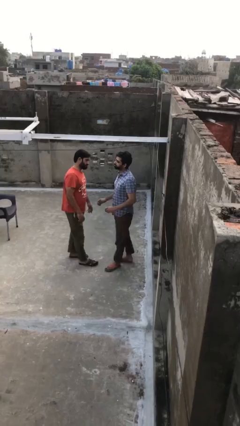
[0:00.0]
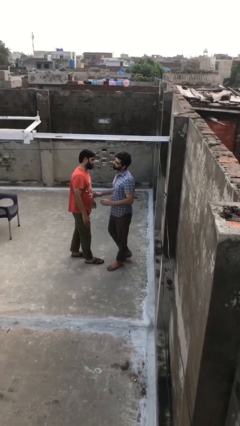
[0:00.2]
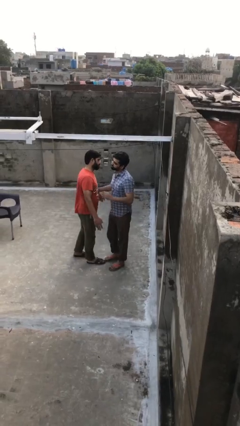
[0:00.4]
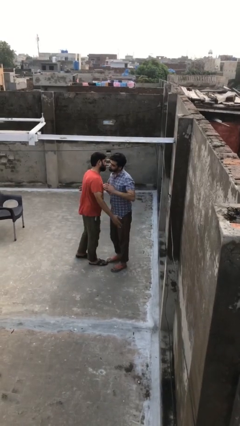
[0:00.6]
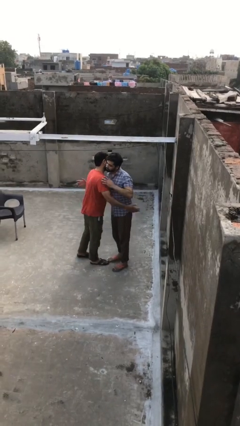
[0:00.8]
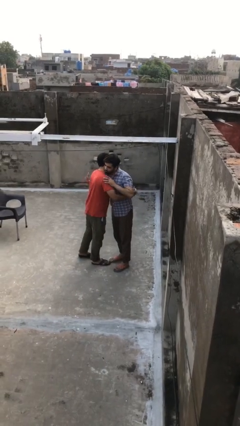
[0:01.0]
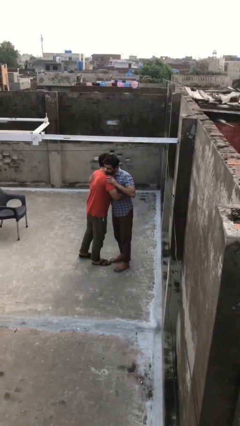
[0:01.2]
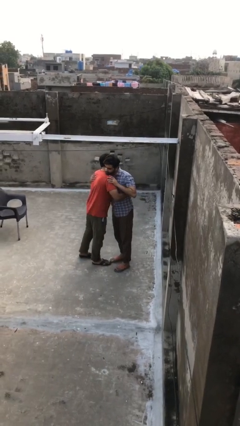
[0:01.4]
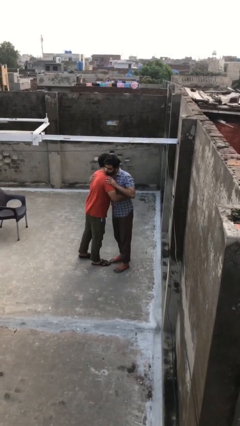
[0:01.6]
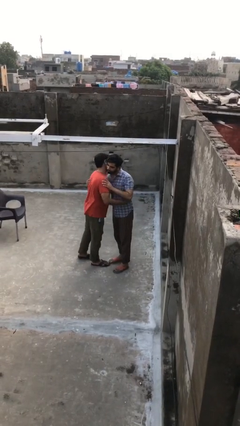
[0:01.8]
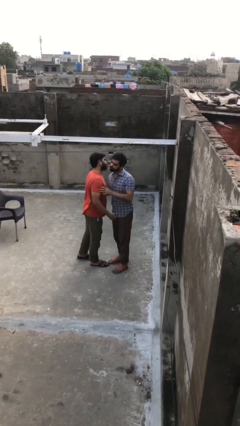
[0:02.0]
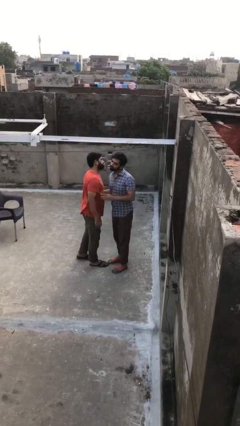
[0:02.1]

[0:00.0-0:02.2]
person embraces person

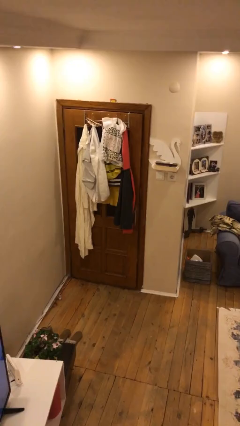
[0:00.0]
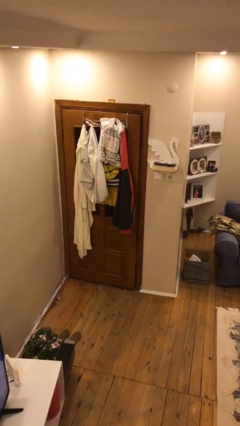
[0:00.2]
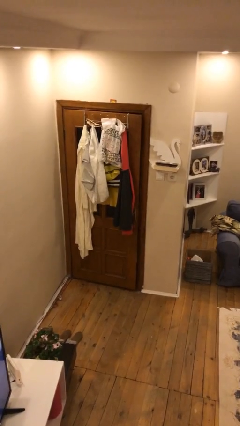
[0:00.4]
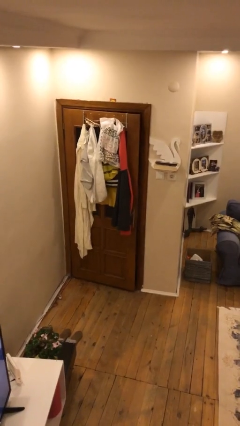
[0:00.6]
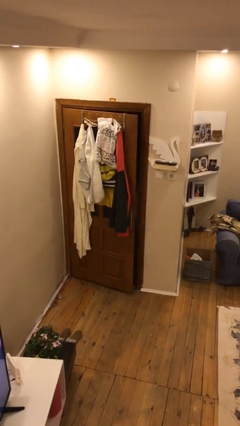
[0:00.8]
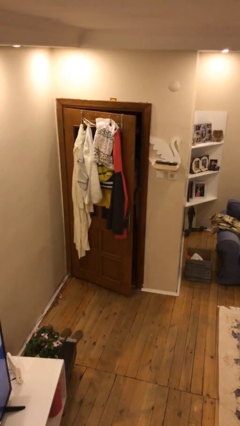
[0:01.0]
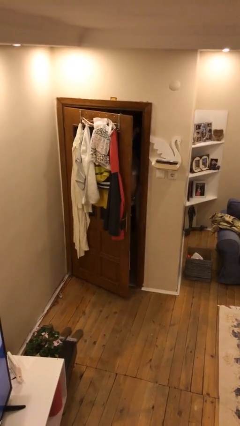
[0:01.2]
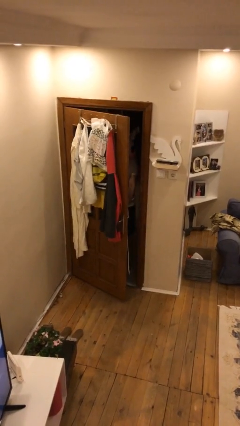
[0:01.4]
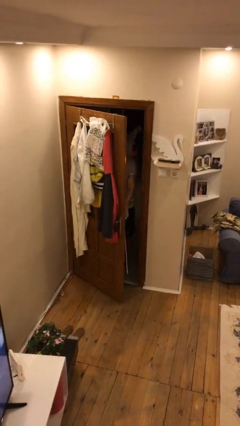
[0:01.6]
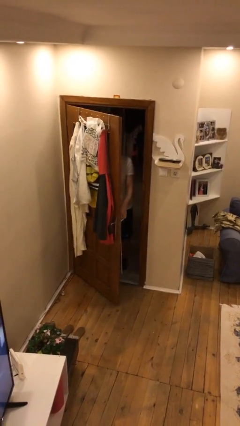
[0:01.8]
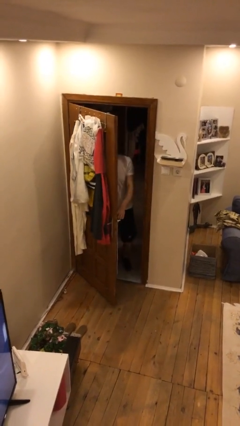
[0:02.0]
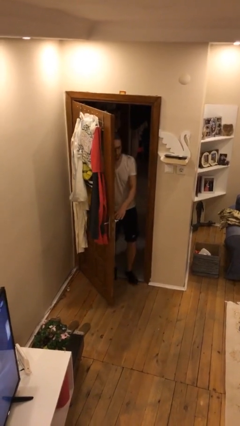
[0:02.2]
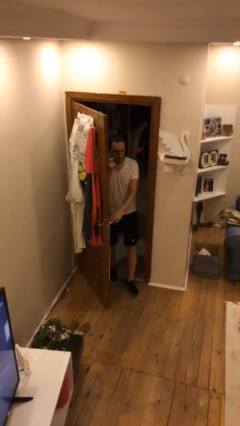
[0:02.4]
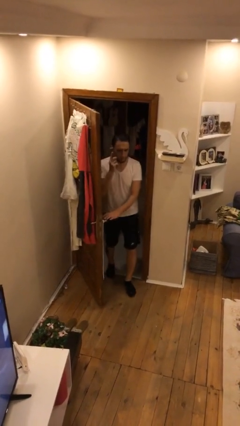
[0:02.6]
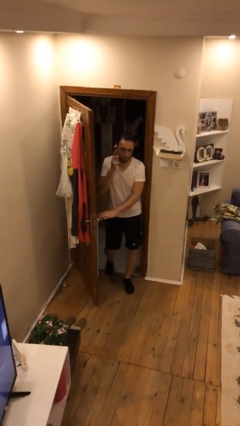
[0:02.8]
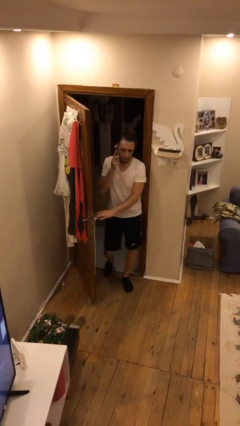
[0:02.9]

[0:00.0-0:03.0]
person opens facility door

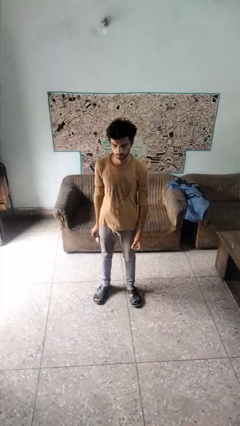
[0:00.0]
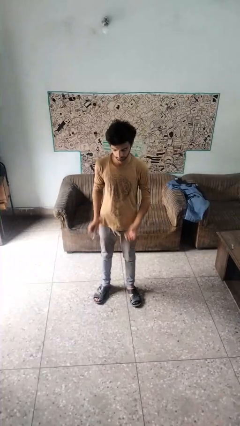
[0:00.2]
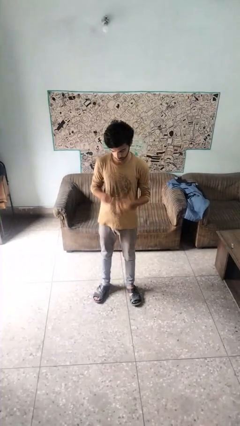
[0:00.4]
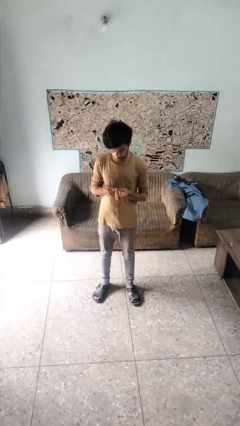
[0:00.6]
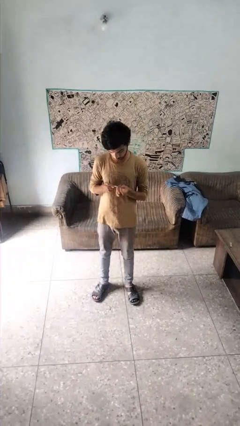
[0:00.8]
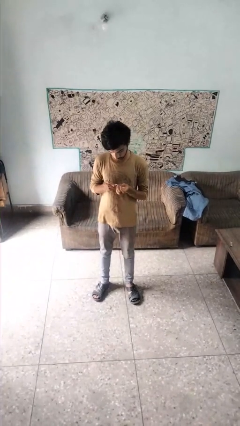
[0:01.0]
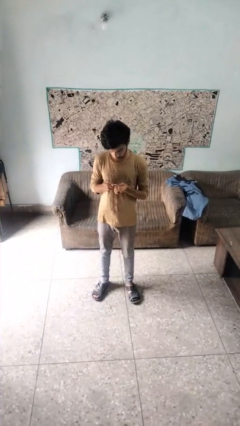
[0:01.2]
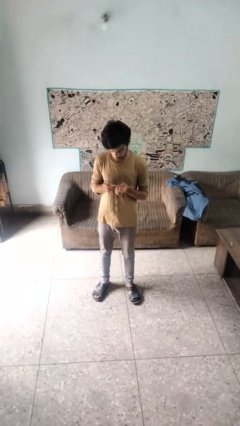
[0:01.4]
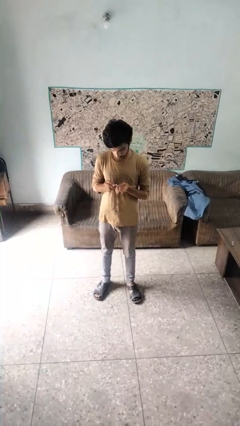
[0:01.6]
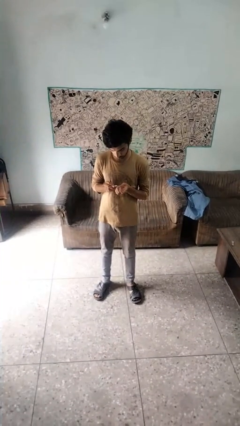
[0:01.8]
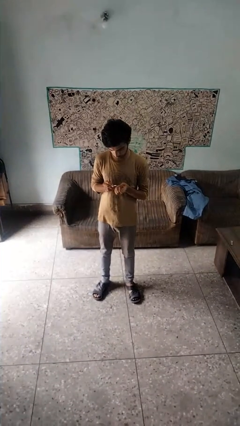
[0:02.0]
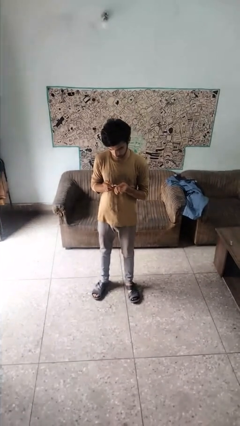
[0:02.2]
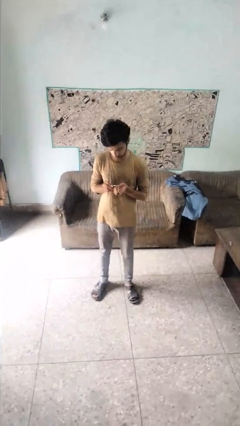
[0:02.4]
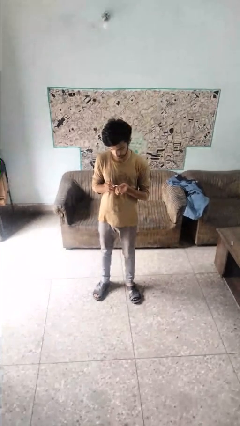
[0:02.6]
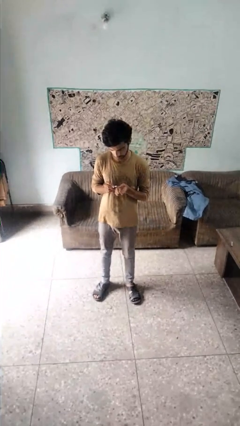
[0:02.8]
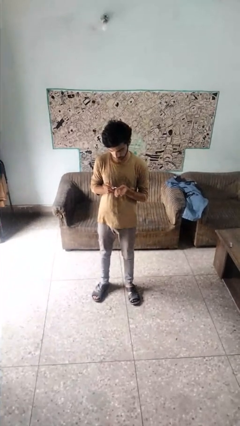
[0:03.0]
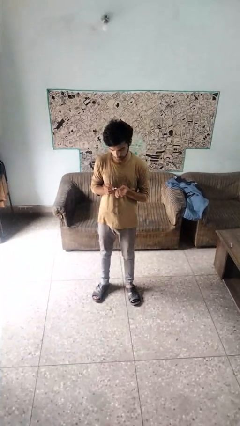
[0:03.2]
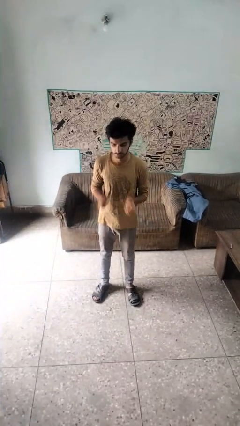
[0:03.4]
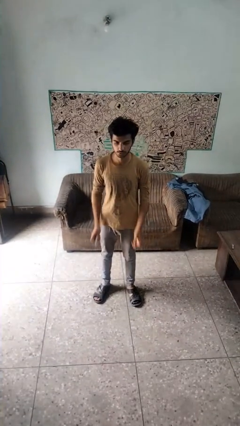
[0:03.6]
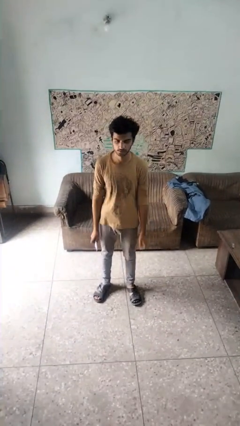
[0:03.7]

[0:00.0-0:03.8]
person files fingernails

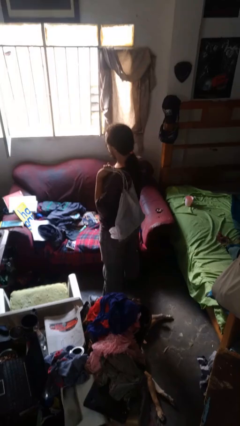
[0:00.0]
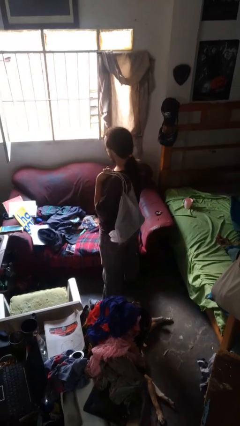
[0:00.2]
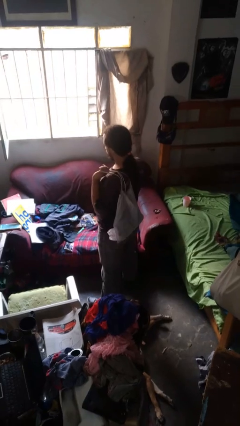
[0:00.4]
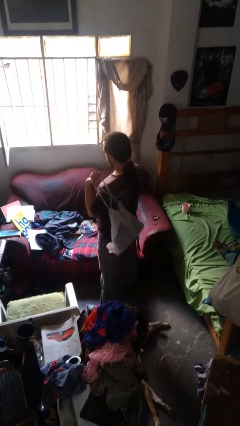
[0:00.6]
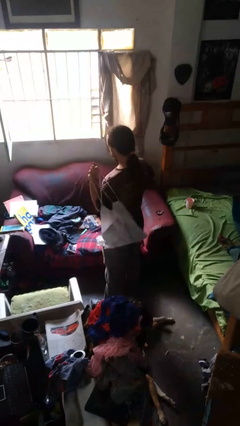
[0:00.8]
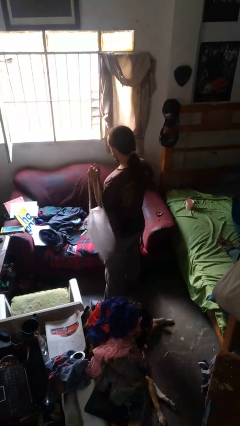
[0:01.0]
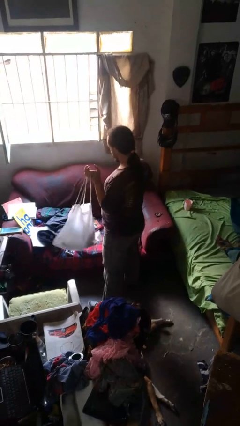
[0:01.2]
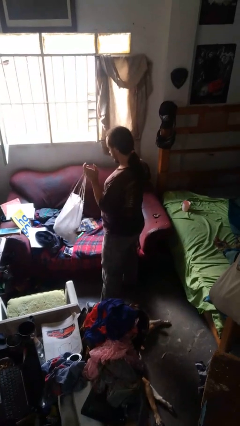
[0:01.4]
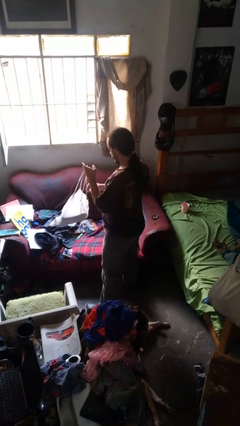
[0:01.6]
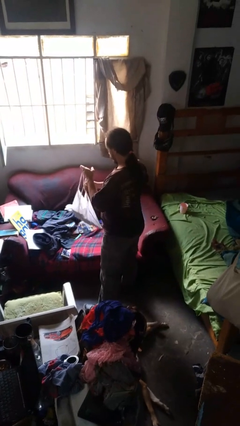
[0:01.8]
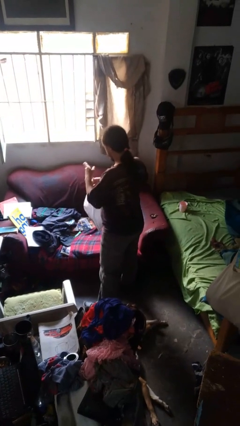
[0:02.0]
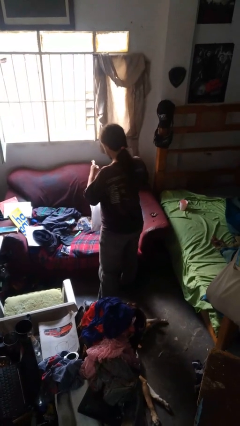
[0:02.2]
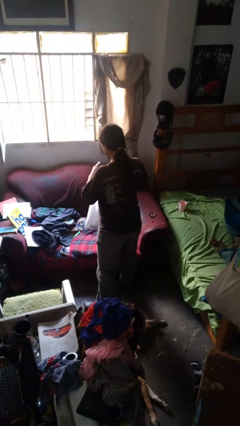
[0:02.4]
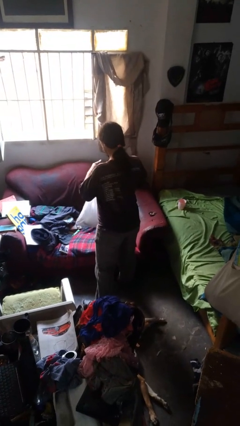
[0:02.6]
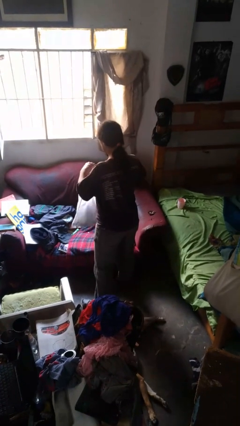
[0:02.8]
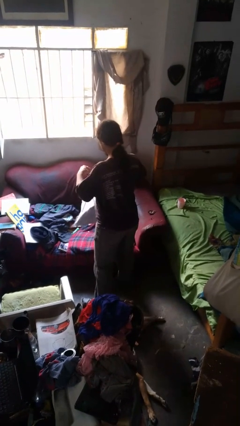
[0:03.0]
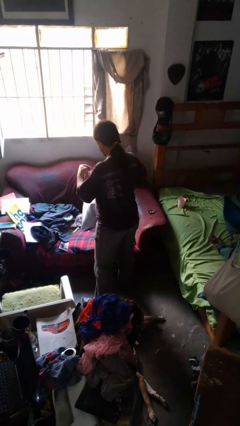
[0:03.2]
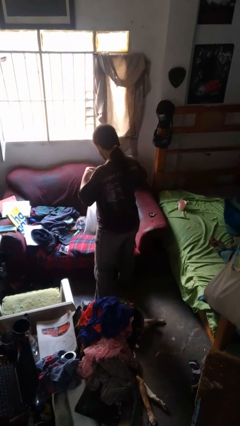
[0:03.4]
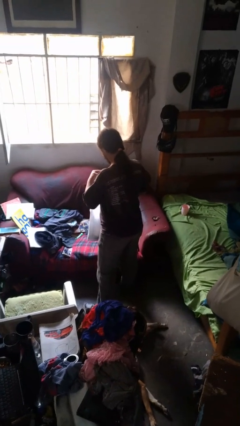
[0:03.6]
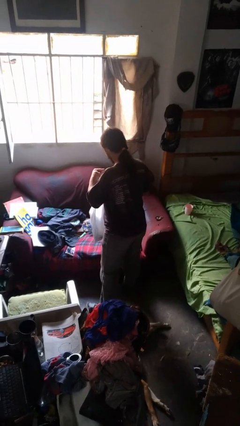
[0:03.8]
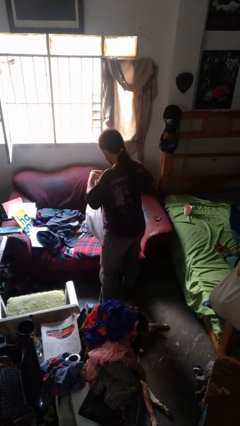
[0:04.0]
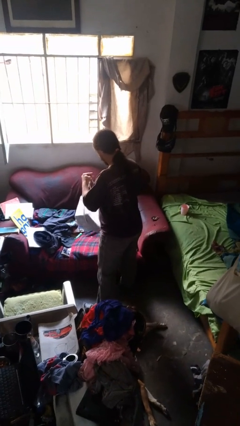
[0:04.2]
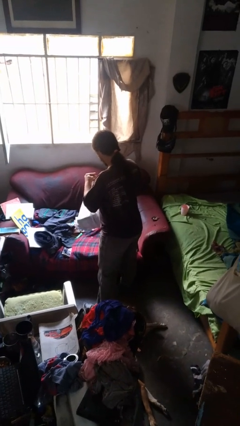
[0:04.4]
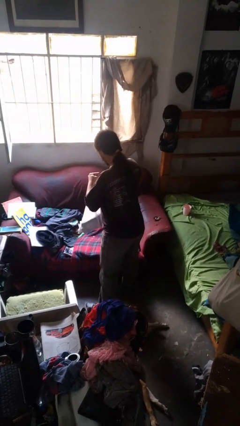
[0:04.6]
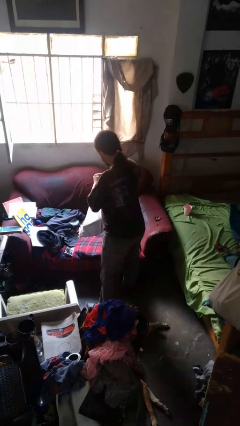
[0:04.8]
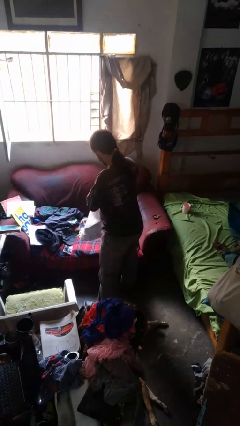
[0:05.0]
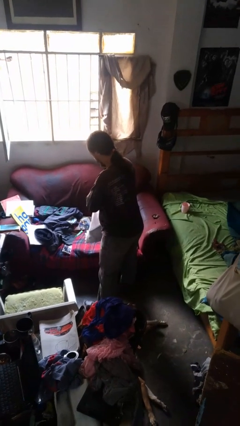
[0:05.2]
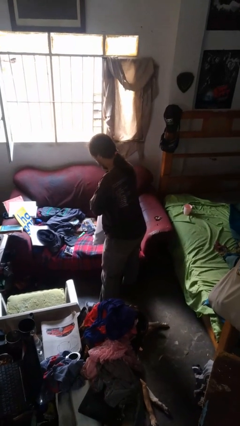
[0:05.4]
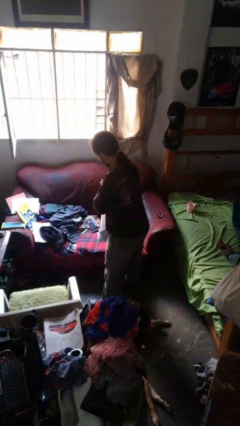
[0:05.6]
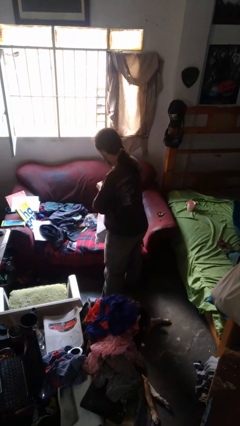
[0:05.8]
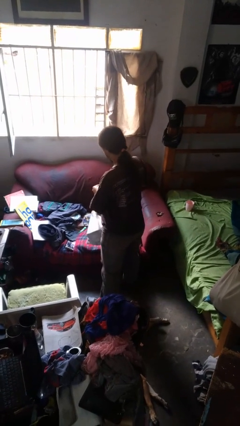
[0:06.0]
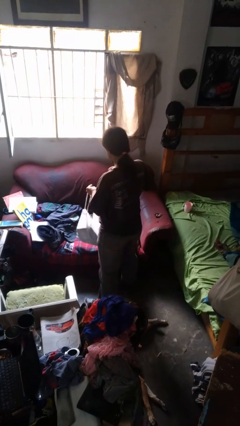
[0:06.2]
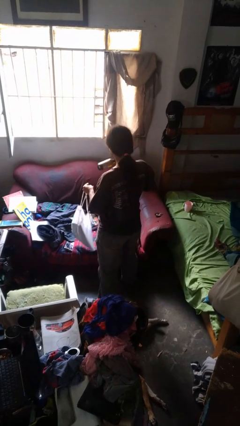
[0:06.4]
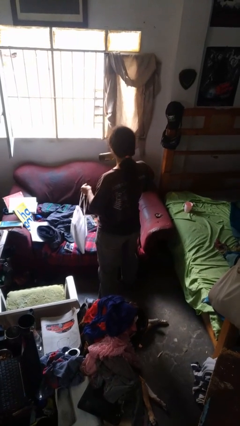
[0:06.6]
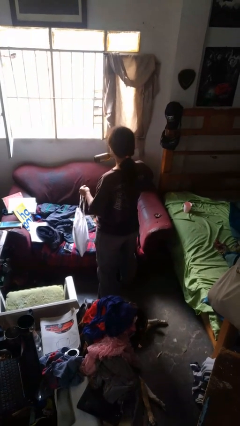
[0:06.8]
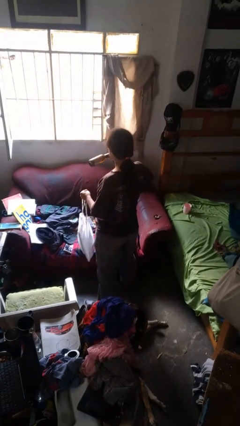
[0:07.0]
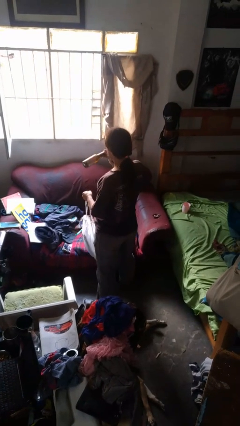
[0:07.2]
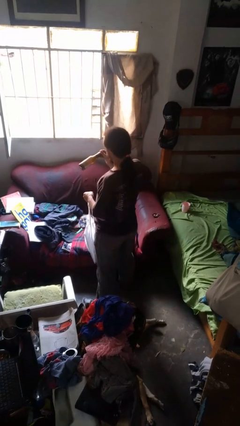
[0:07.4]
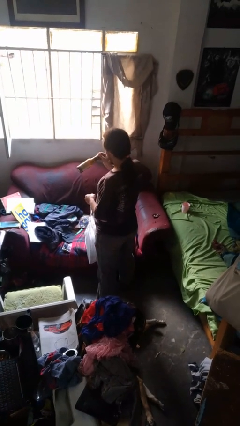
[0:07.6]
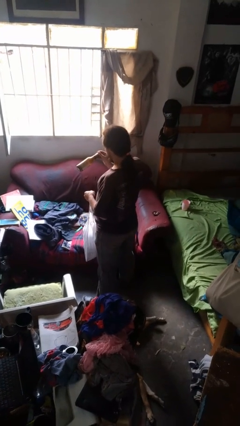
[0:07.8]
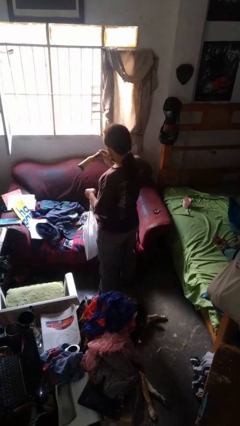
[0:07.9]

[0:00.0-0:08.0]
person takes object from bag

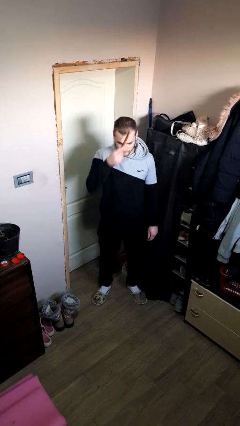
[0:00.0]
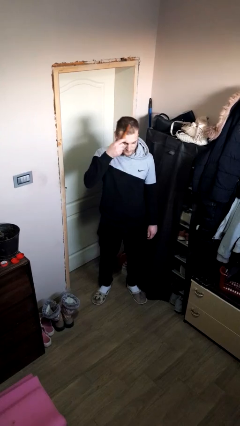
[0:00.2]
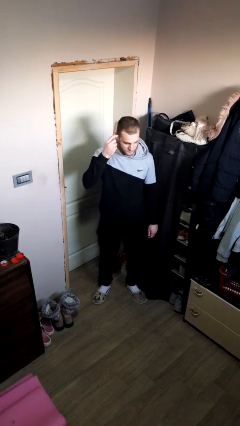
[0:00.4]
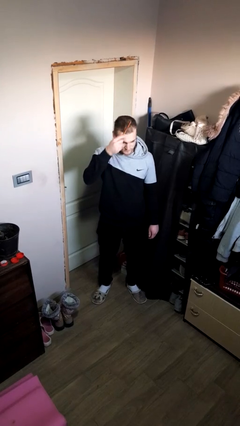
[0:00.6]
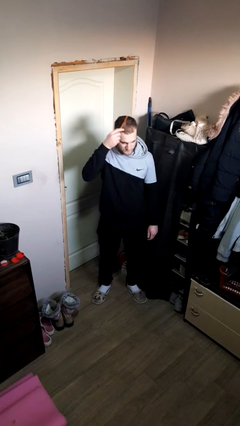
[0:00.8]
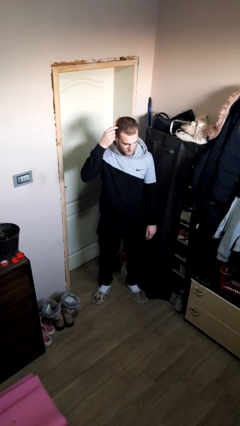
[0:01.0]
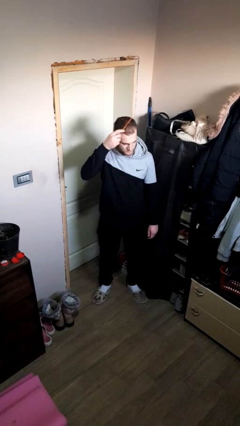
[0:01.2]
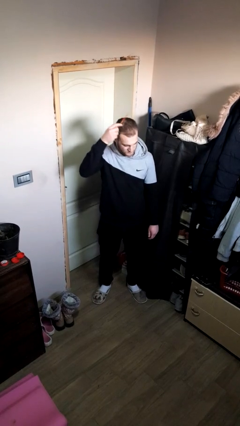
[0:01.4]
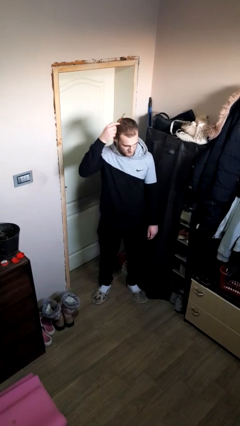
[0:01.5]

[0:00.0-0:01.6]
person brushes hair
